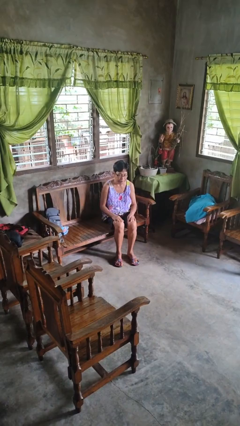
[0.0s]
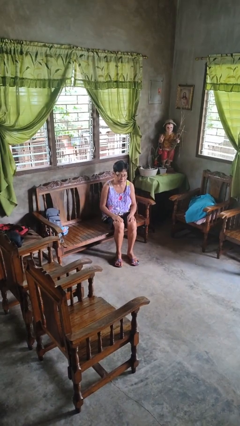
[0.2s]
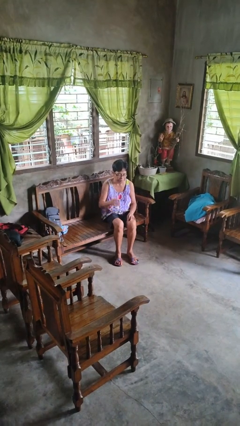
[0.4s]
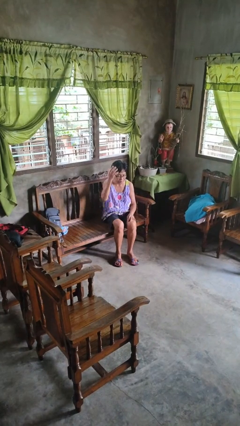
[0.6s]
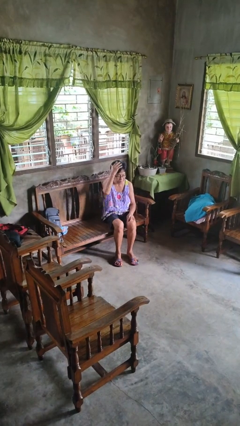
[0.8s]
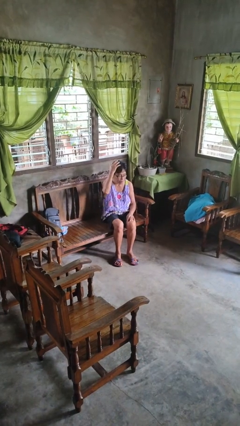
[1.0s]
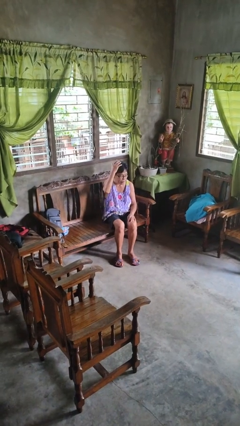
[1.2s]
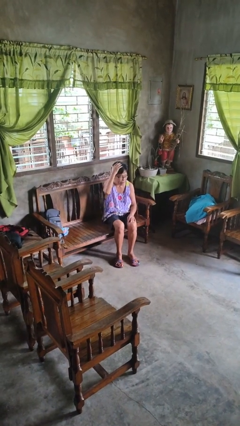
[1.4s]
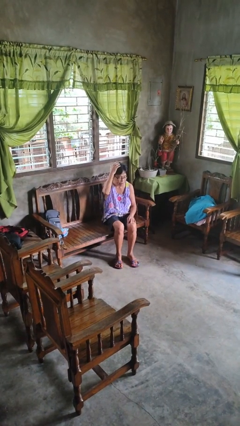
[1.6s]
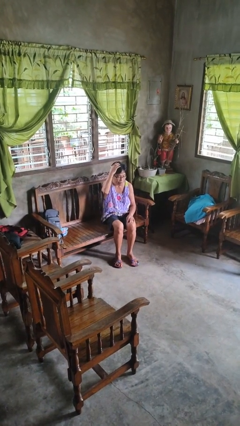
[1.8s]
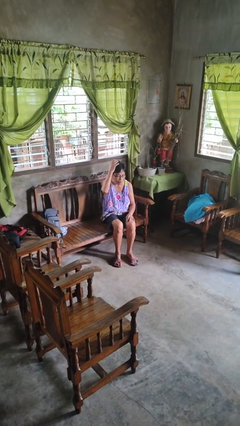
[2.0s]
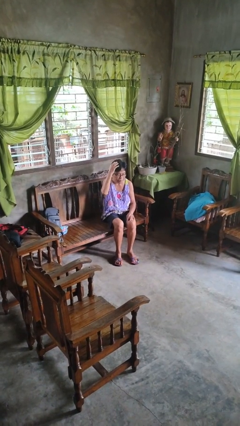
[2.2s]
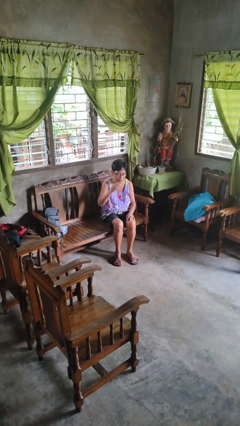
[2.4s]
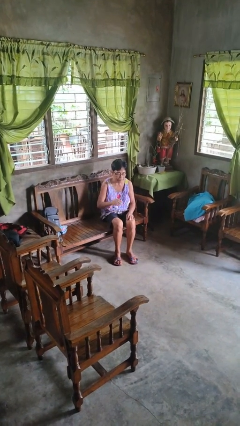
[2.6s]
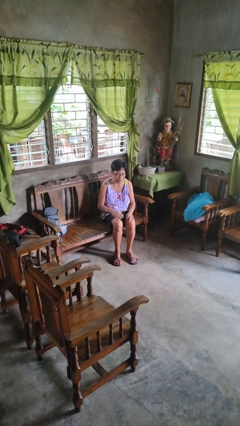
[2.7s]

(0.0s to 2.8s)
person pats head

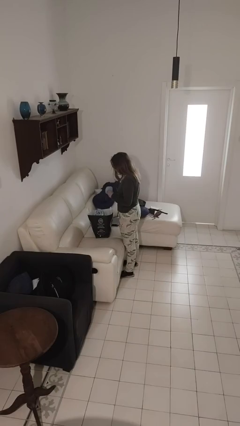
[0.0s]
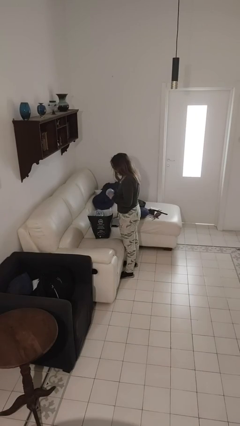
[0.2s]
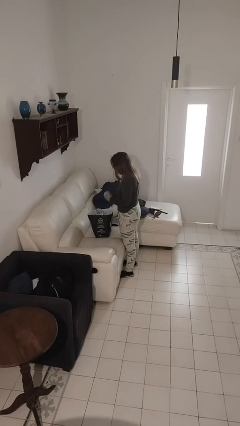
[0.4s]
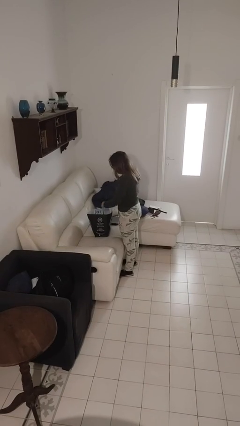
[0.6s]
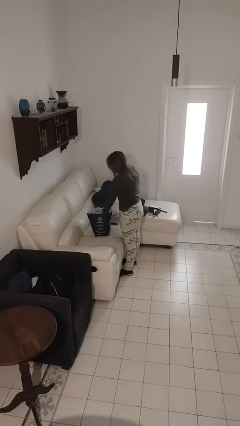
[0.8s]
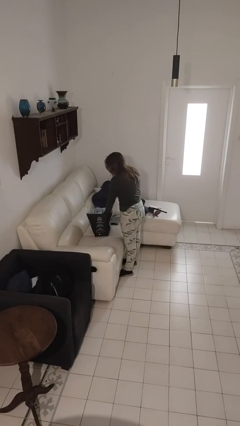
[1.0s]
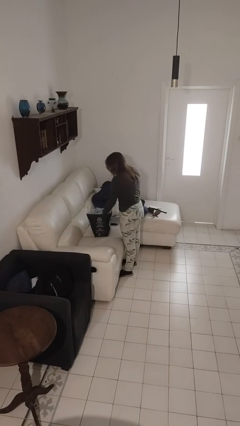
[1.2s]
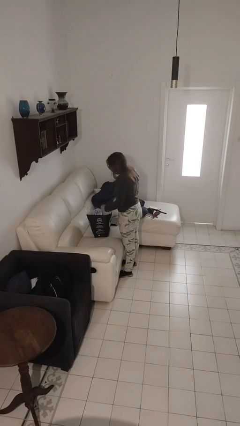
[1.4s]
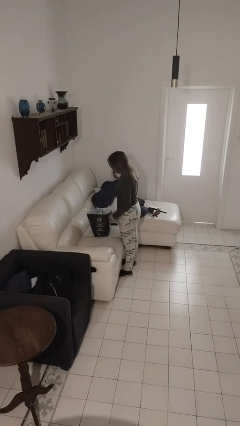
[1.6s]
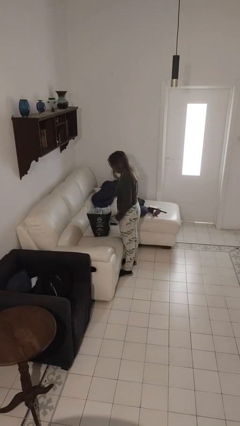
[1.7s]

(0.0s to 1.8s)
person puts object into bag

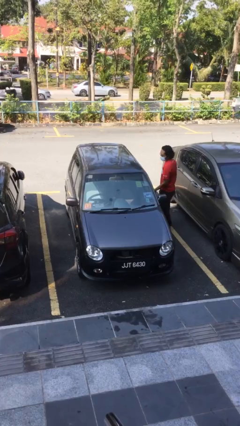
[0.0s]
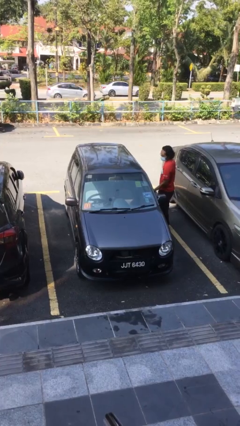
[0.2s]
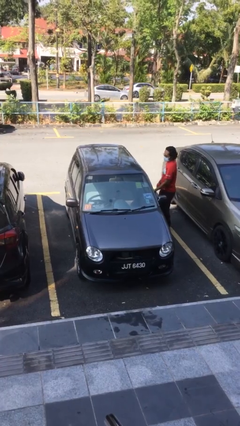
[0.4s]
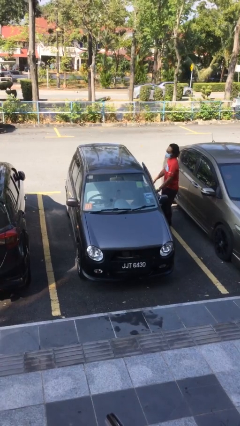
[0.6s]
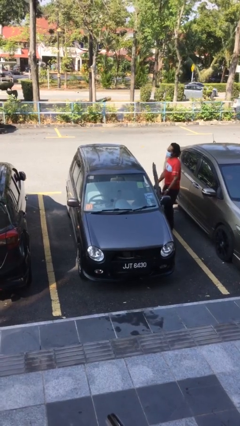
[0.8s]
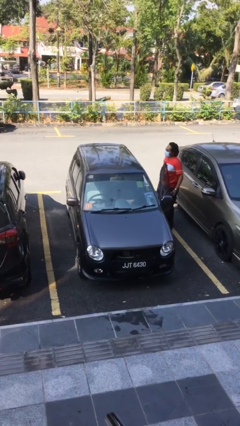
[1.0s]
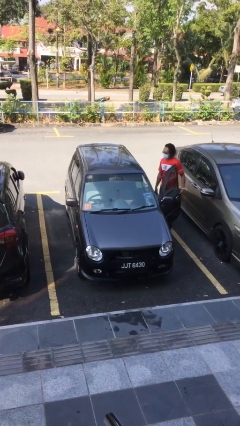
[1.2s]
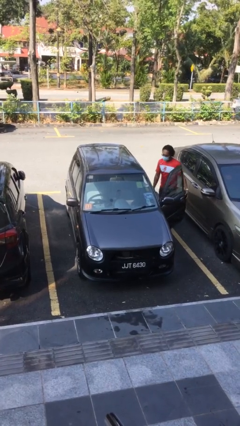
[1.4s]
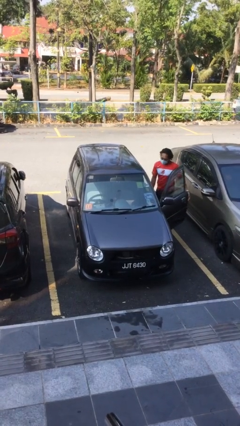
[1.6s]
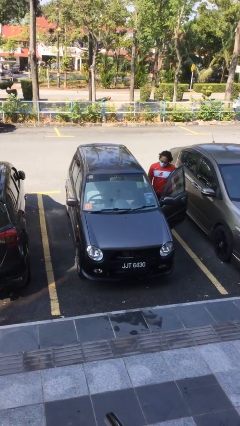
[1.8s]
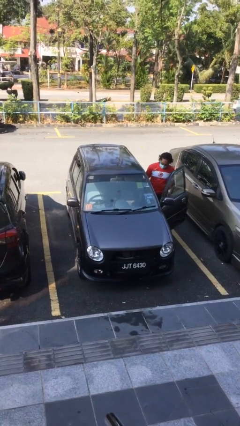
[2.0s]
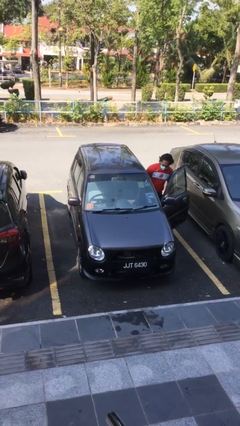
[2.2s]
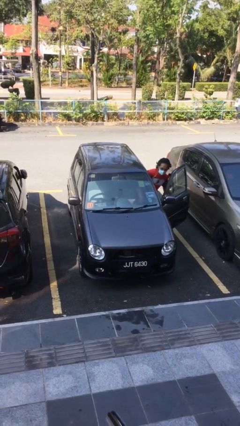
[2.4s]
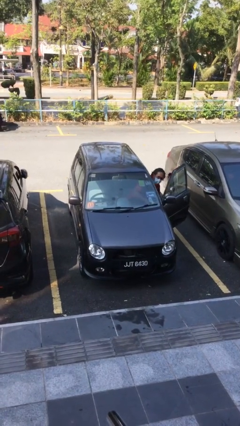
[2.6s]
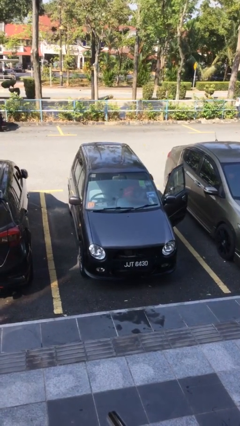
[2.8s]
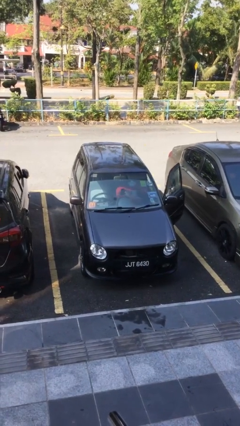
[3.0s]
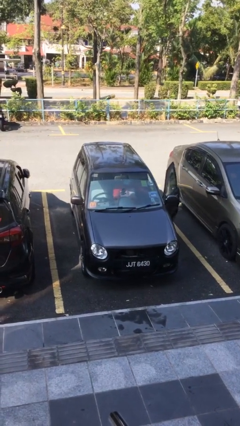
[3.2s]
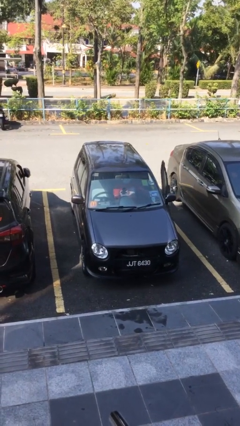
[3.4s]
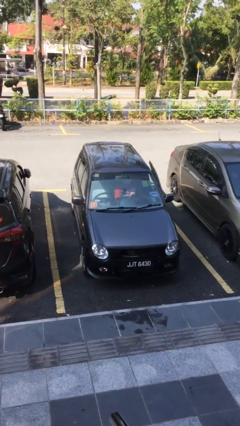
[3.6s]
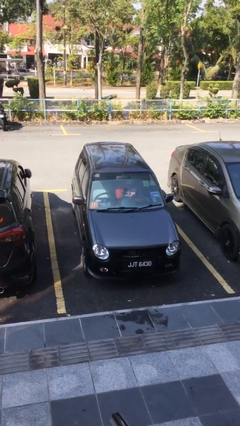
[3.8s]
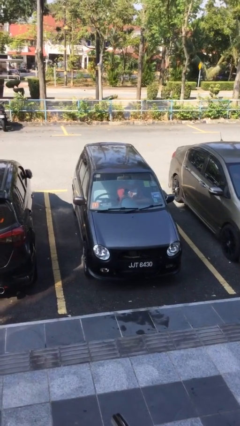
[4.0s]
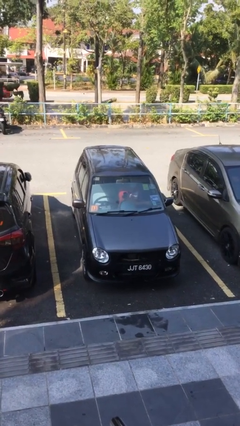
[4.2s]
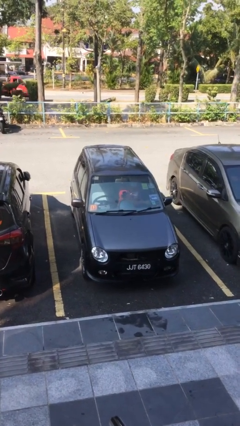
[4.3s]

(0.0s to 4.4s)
car picks up person

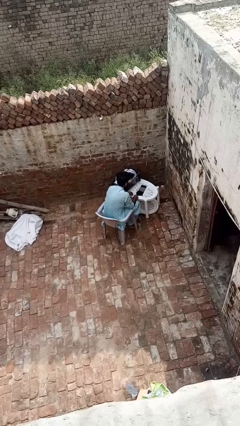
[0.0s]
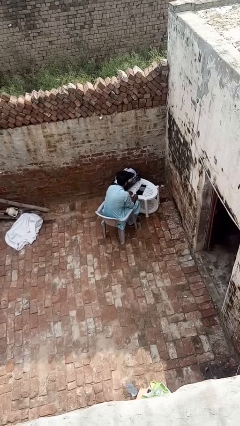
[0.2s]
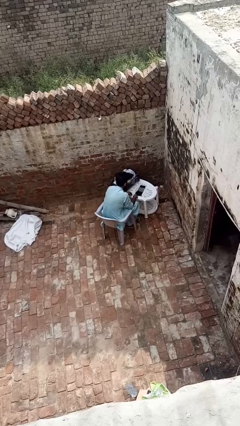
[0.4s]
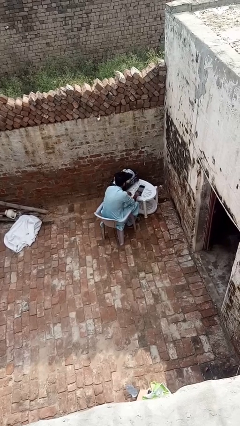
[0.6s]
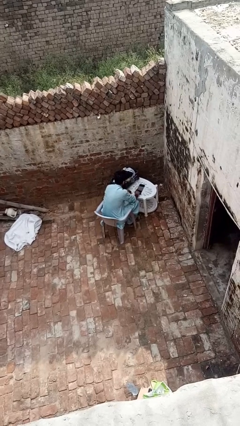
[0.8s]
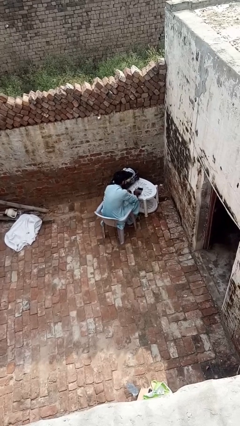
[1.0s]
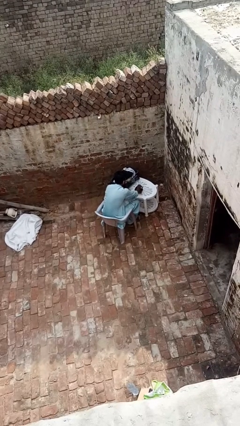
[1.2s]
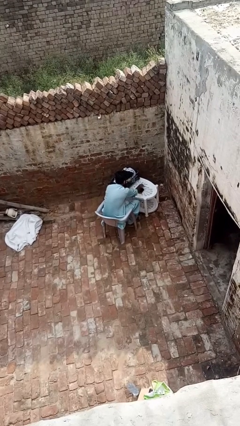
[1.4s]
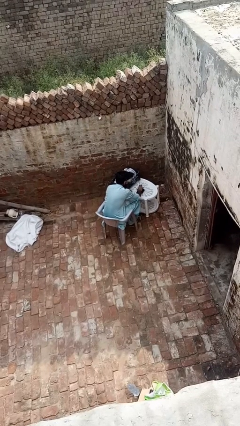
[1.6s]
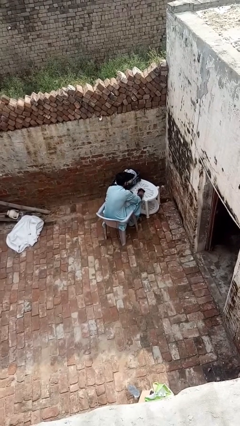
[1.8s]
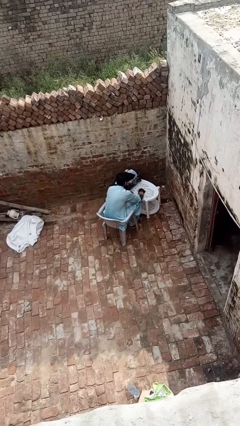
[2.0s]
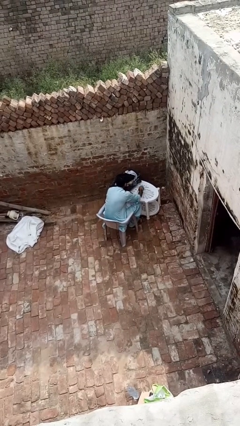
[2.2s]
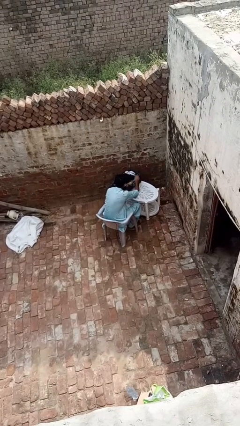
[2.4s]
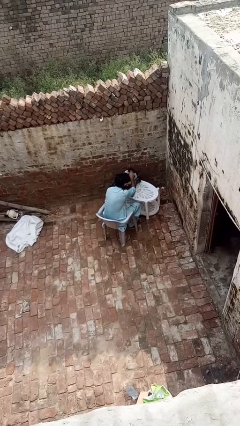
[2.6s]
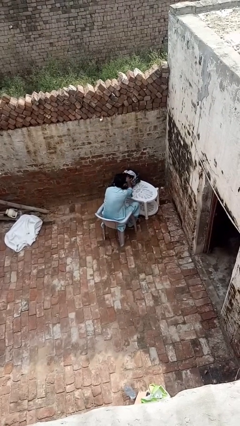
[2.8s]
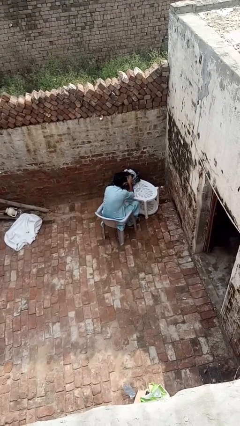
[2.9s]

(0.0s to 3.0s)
person folds socks

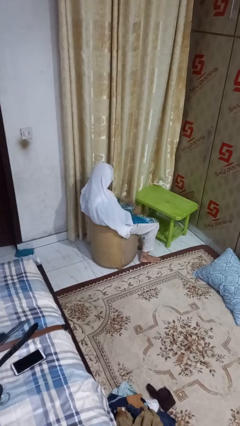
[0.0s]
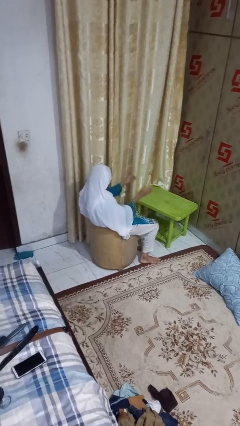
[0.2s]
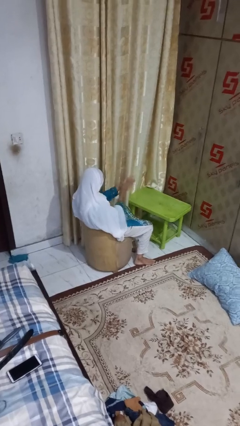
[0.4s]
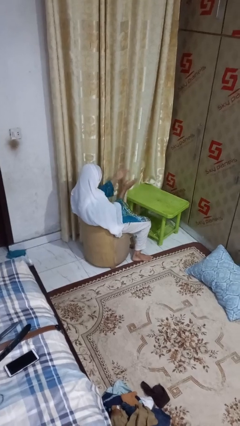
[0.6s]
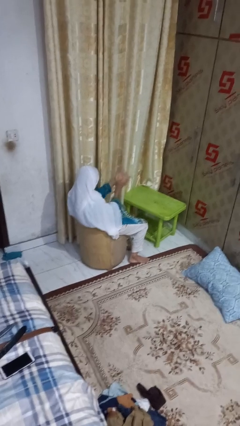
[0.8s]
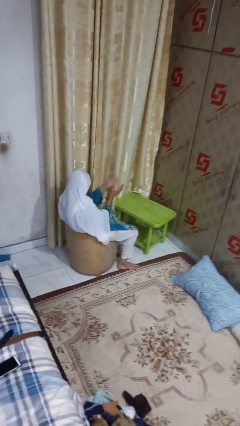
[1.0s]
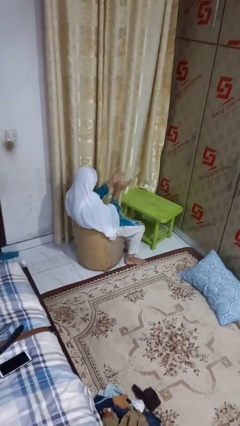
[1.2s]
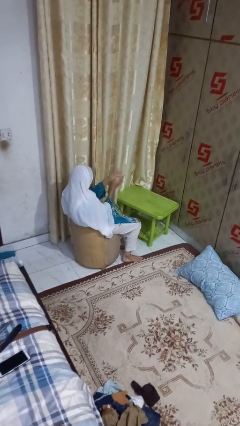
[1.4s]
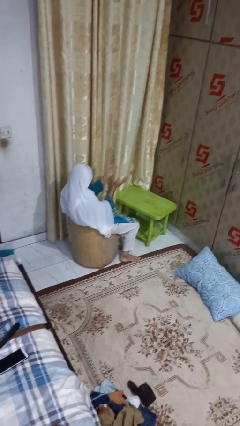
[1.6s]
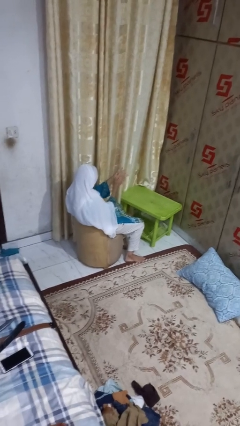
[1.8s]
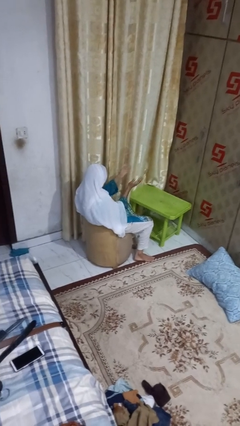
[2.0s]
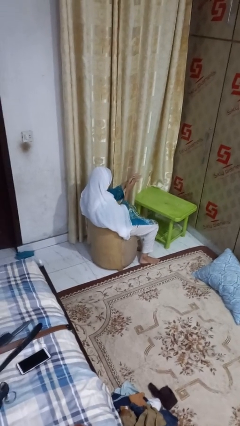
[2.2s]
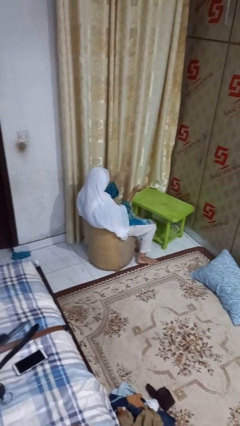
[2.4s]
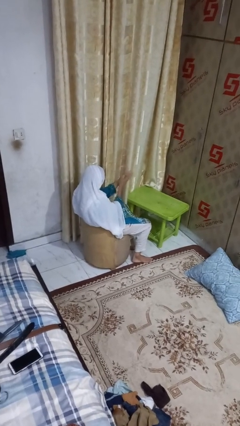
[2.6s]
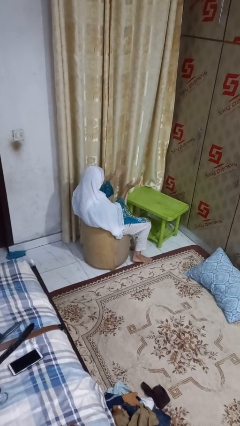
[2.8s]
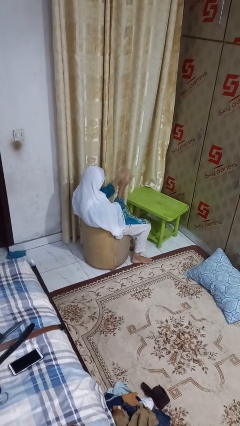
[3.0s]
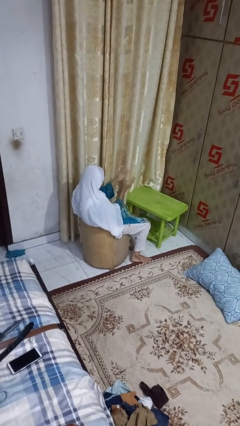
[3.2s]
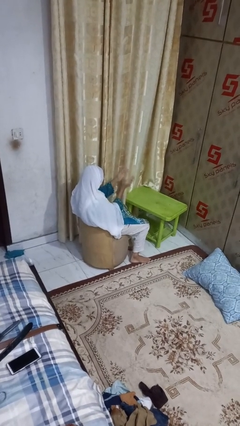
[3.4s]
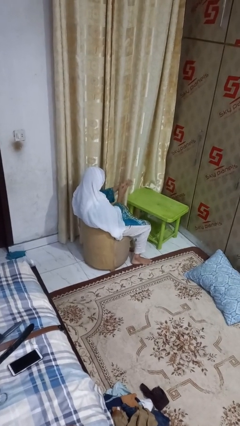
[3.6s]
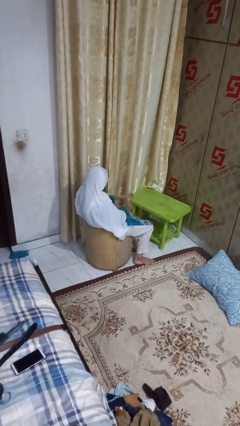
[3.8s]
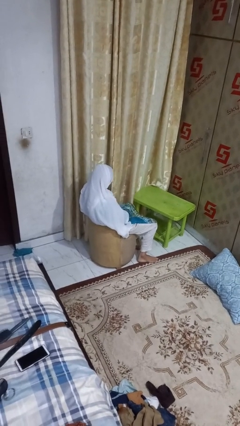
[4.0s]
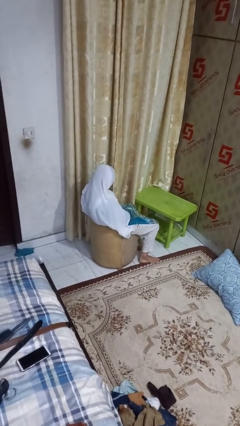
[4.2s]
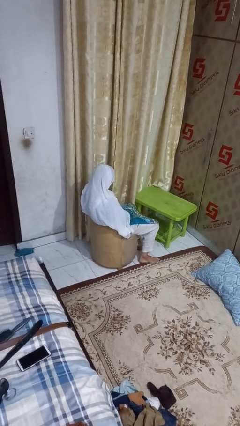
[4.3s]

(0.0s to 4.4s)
person claps hands

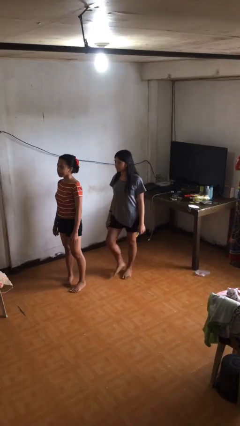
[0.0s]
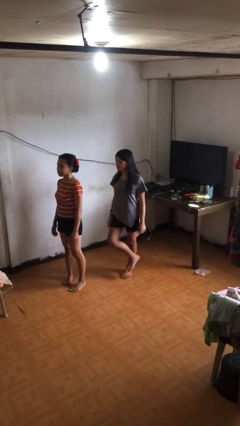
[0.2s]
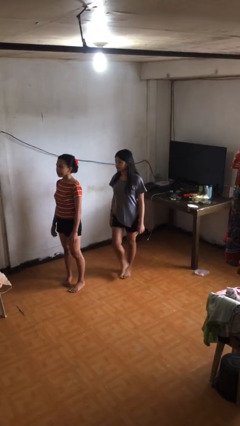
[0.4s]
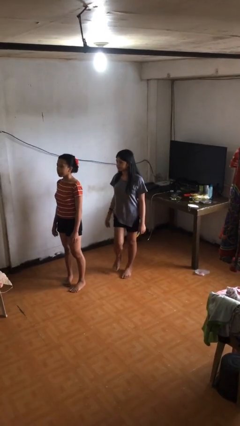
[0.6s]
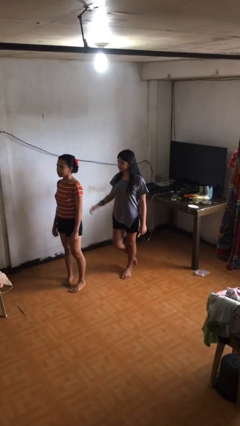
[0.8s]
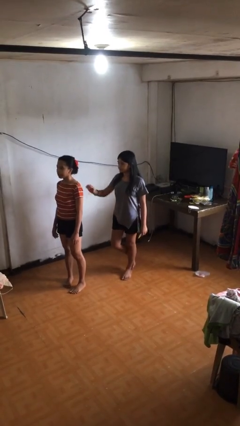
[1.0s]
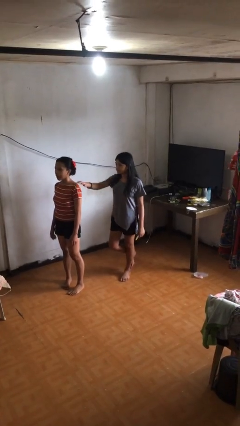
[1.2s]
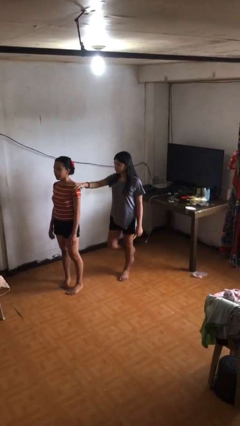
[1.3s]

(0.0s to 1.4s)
person grabs person by shoulder
